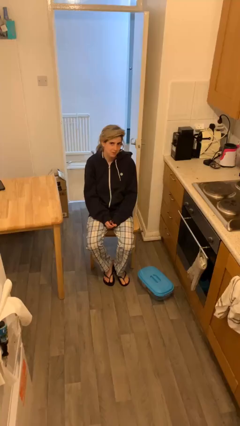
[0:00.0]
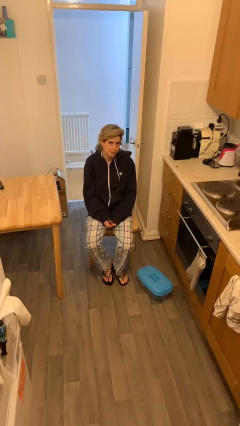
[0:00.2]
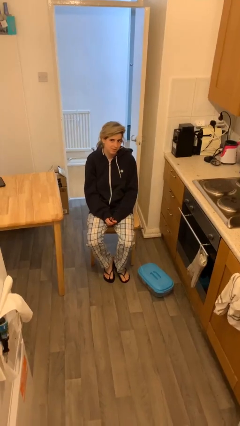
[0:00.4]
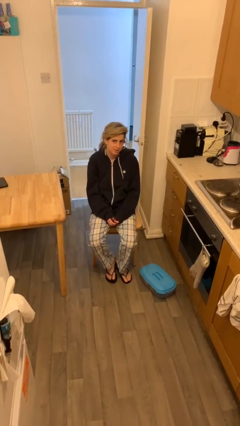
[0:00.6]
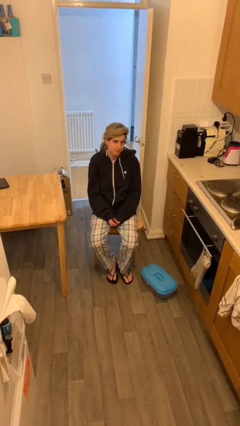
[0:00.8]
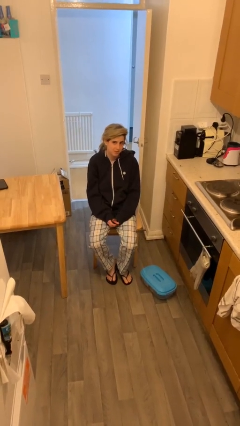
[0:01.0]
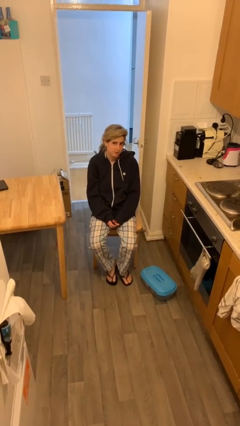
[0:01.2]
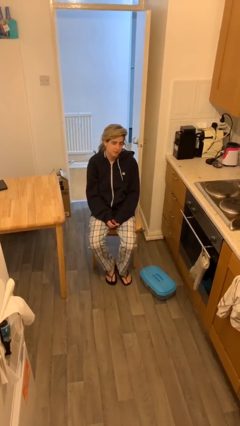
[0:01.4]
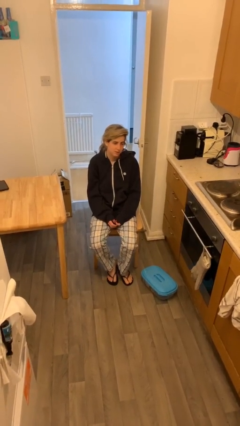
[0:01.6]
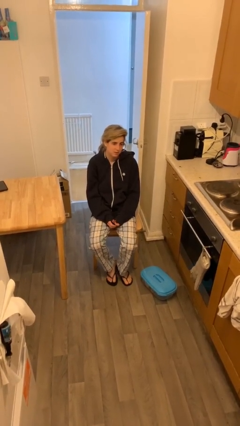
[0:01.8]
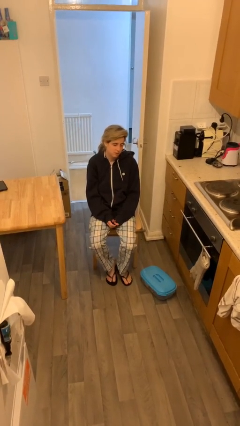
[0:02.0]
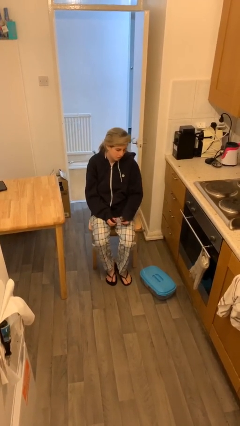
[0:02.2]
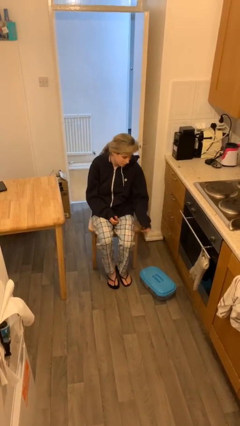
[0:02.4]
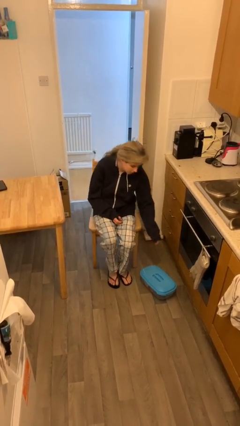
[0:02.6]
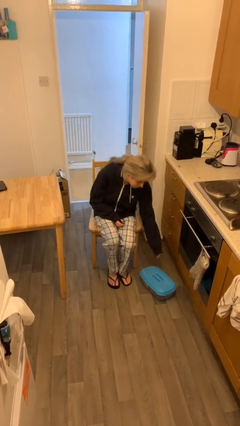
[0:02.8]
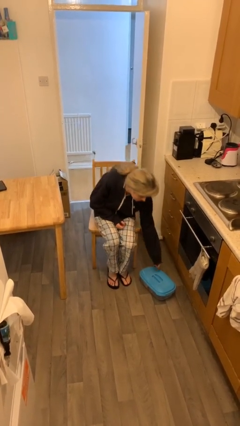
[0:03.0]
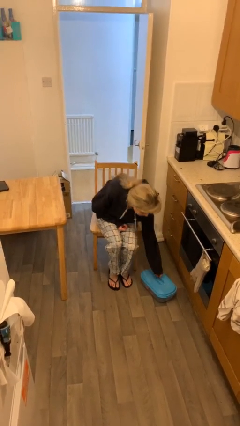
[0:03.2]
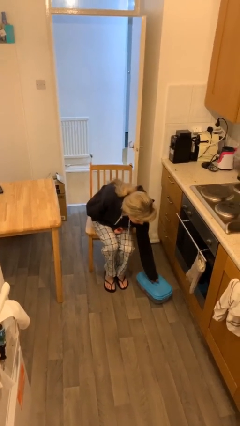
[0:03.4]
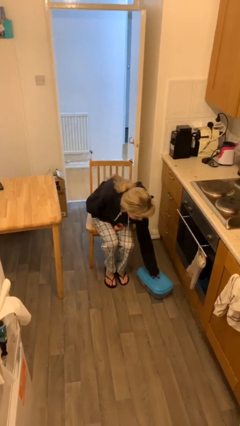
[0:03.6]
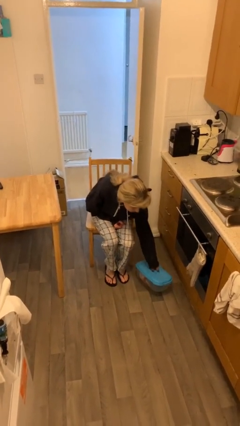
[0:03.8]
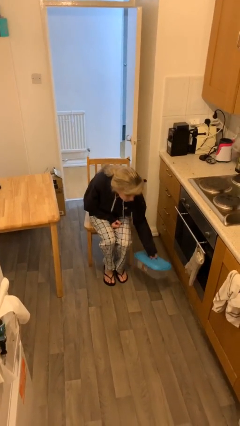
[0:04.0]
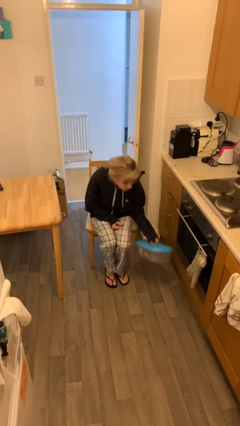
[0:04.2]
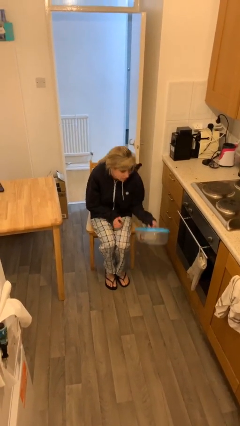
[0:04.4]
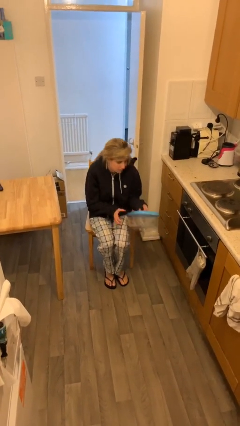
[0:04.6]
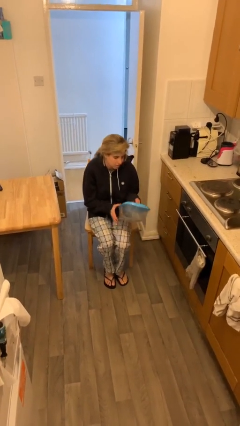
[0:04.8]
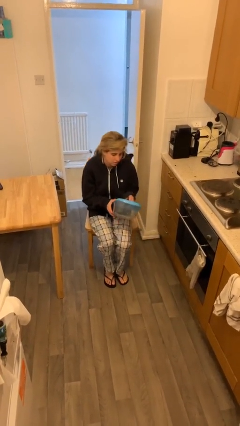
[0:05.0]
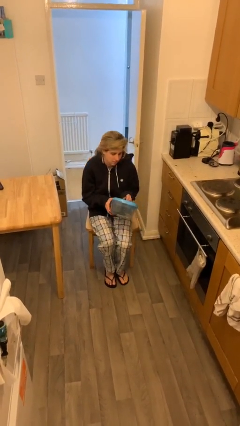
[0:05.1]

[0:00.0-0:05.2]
person picks up object from floor

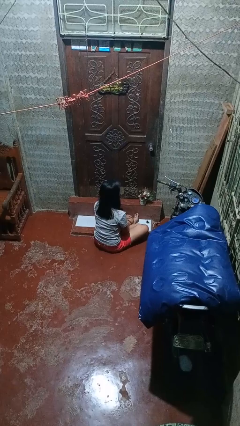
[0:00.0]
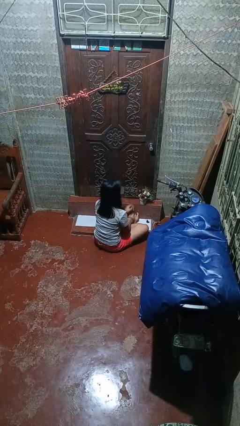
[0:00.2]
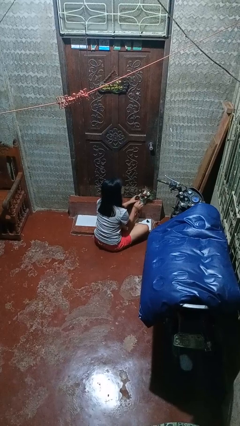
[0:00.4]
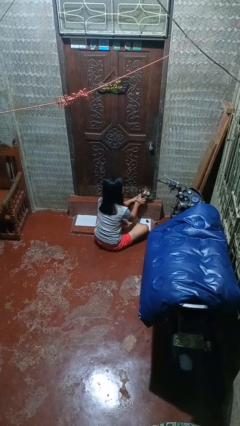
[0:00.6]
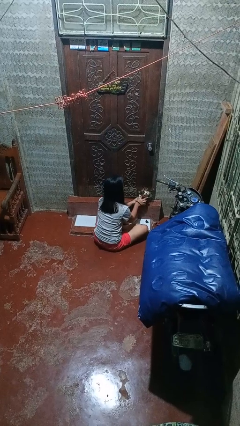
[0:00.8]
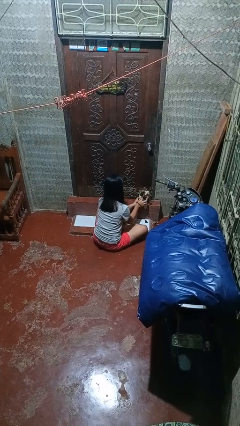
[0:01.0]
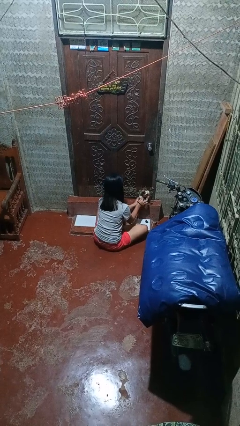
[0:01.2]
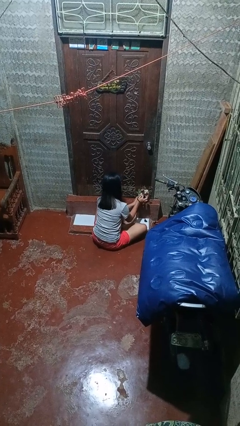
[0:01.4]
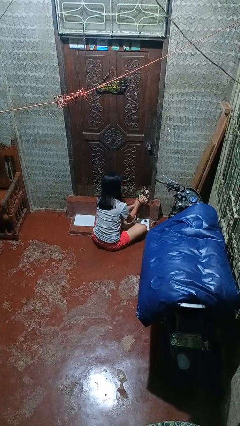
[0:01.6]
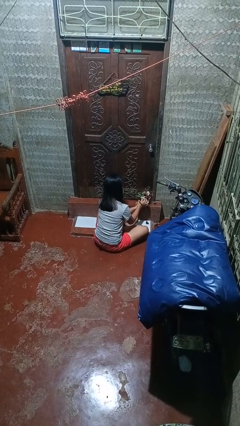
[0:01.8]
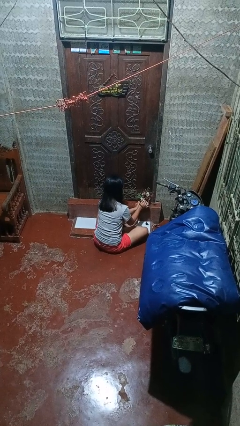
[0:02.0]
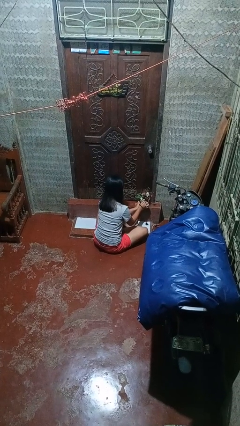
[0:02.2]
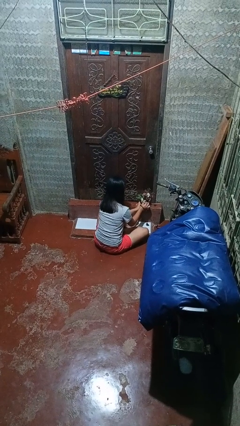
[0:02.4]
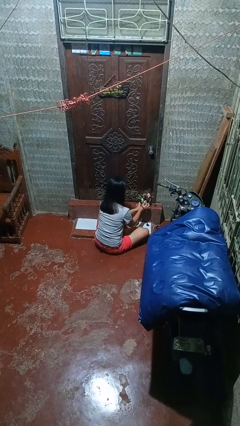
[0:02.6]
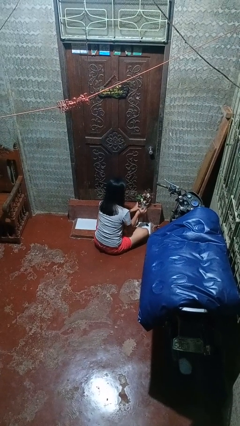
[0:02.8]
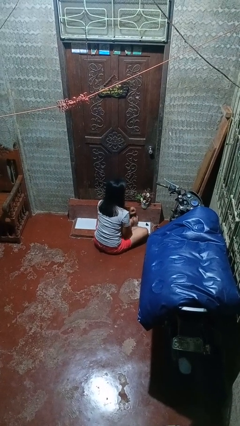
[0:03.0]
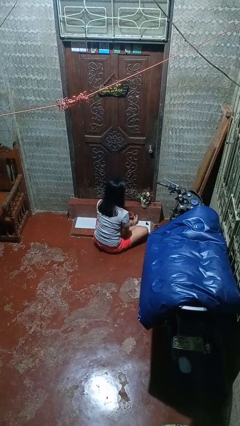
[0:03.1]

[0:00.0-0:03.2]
person arranges flowers in vase

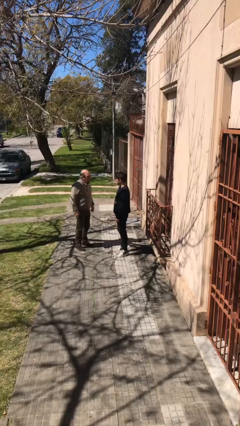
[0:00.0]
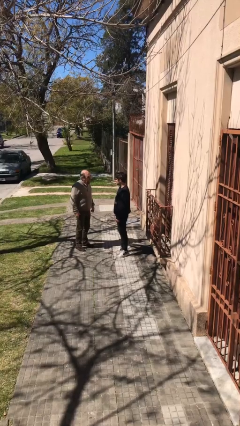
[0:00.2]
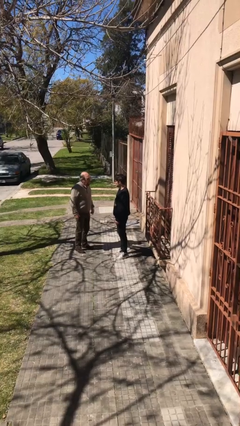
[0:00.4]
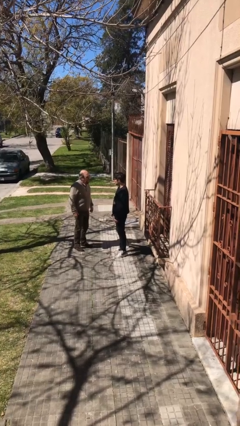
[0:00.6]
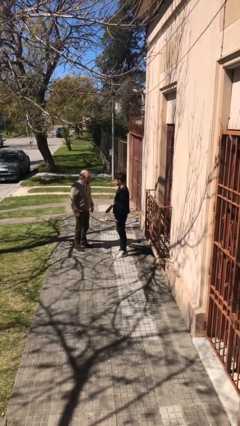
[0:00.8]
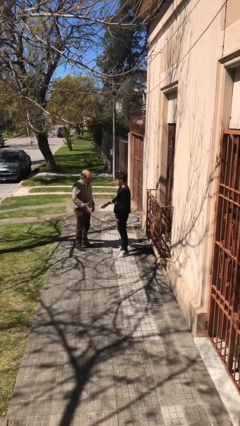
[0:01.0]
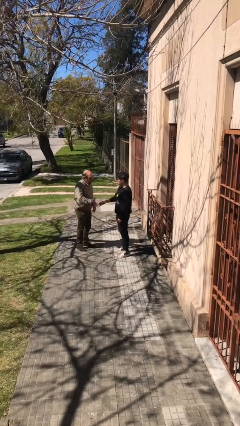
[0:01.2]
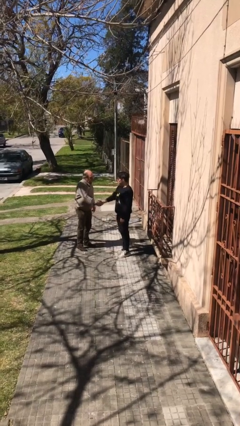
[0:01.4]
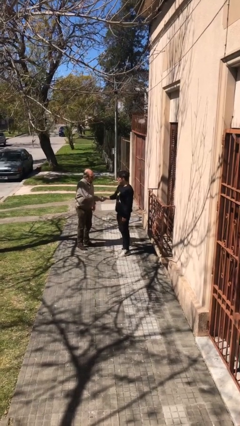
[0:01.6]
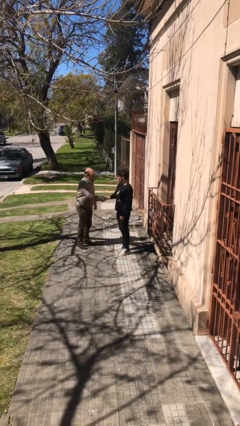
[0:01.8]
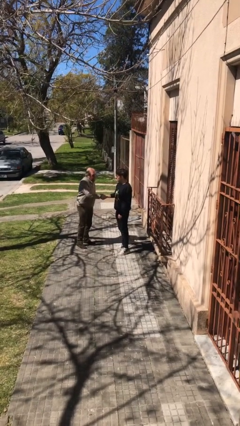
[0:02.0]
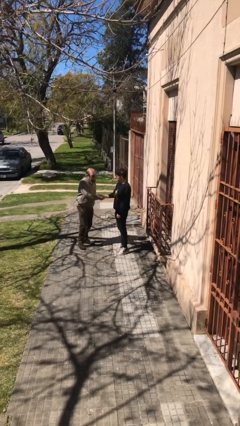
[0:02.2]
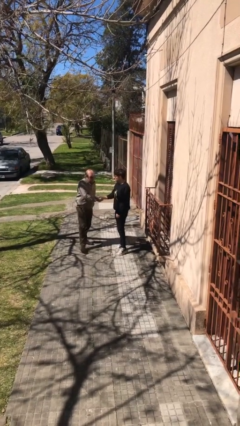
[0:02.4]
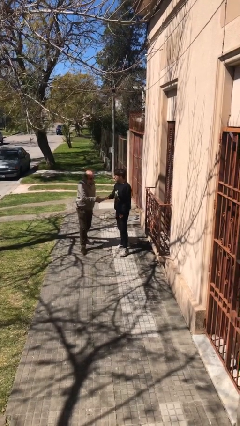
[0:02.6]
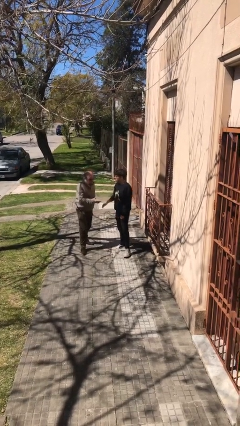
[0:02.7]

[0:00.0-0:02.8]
person shakes hand

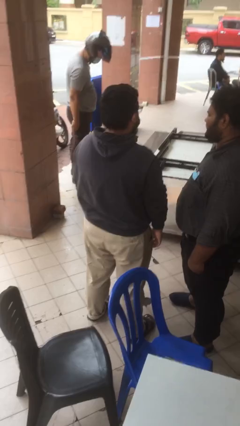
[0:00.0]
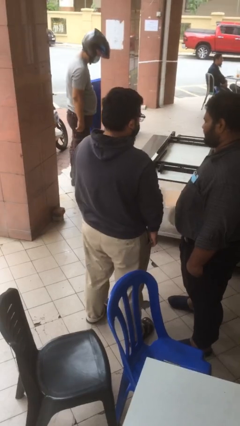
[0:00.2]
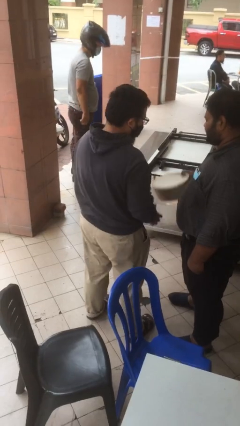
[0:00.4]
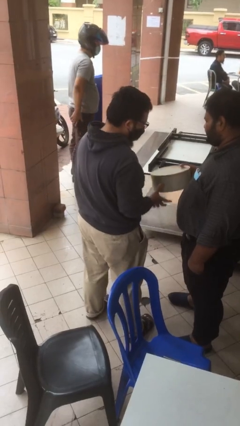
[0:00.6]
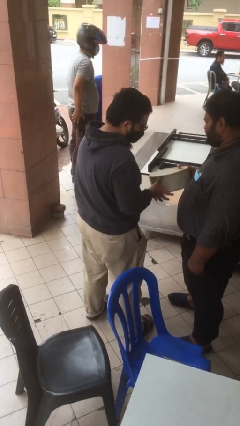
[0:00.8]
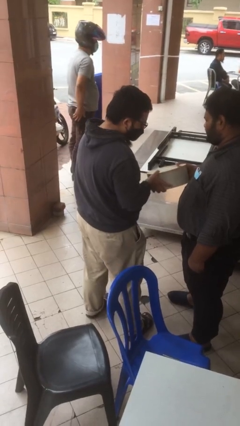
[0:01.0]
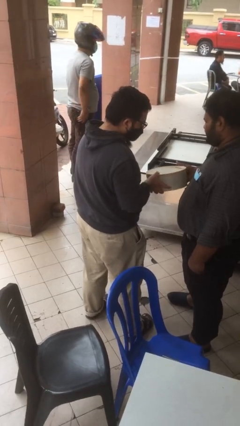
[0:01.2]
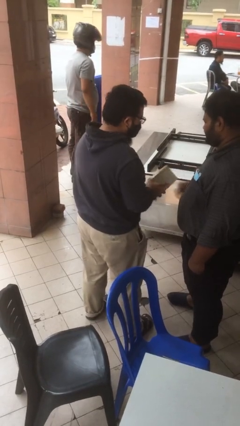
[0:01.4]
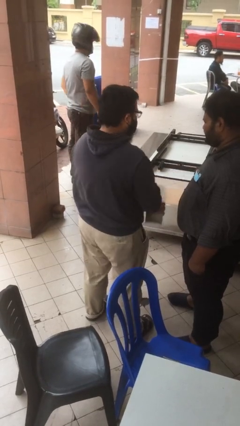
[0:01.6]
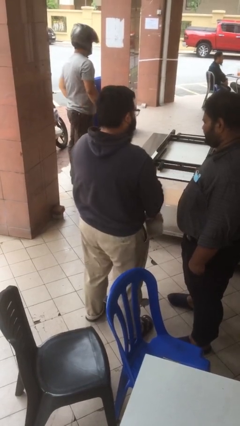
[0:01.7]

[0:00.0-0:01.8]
person transfers object to person

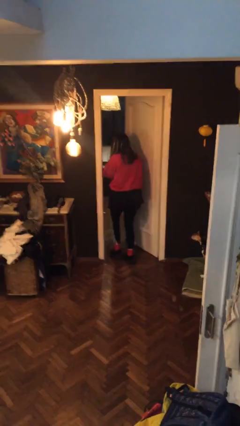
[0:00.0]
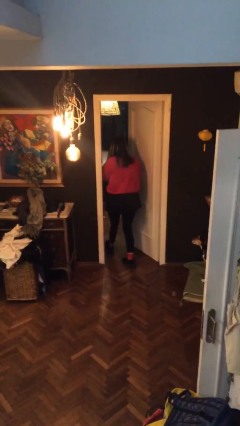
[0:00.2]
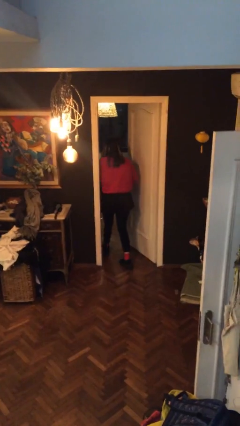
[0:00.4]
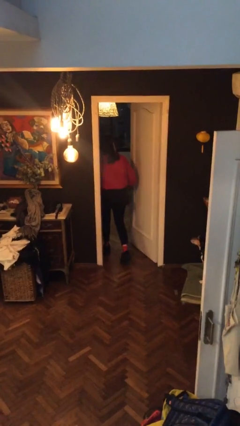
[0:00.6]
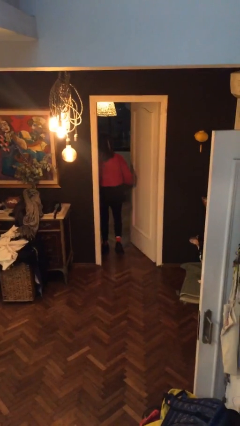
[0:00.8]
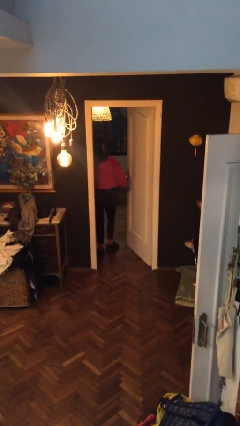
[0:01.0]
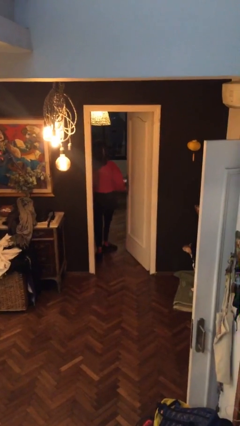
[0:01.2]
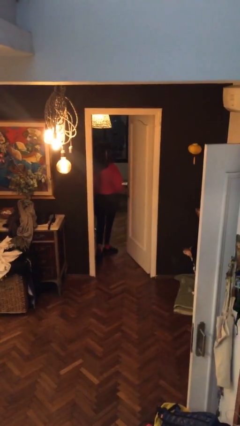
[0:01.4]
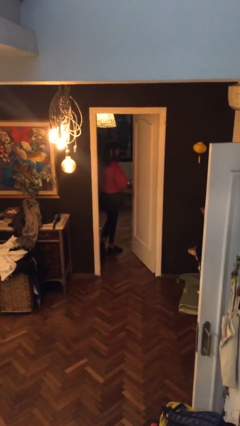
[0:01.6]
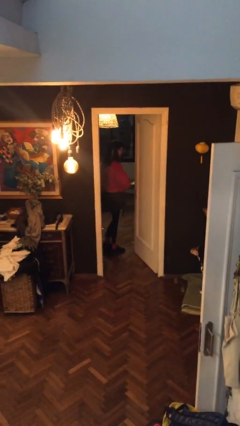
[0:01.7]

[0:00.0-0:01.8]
person exits scene through structure

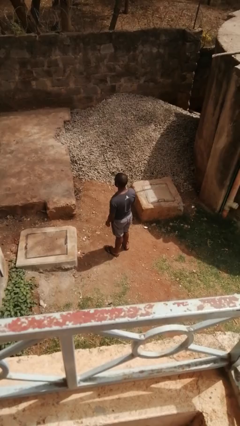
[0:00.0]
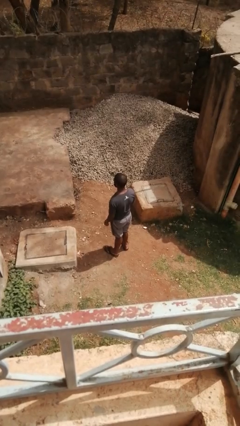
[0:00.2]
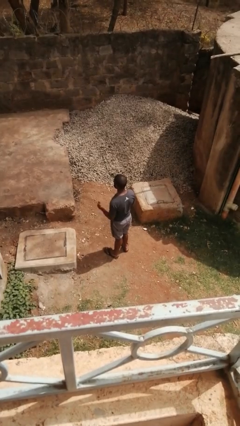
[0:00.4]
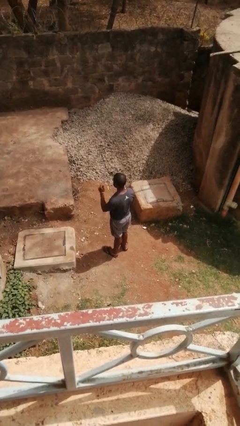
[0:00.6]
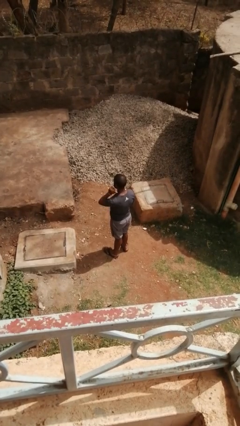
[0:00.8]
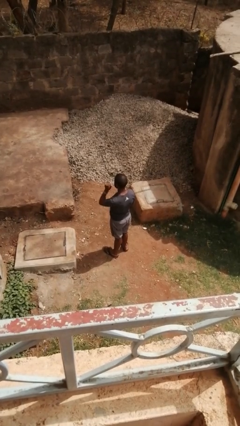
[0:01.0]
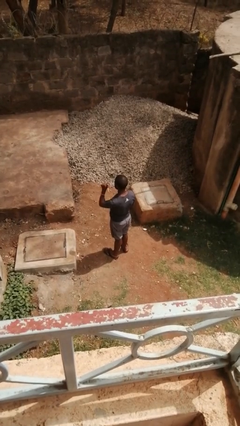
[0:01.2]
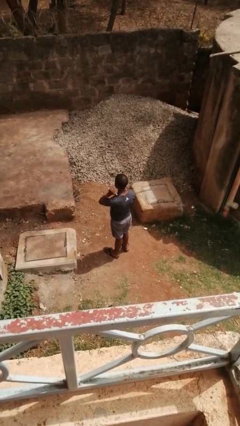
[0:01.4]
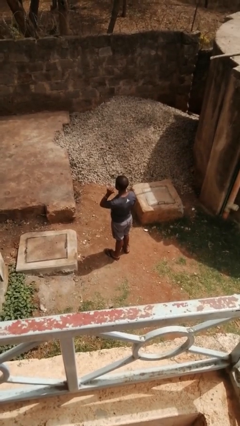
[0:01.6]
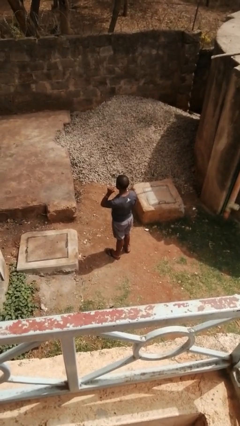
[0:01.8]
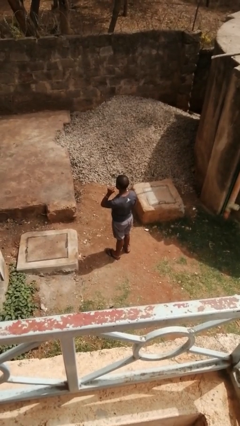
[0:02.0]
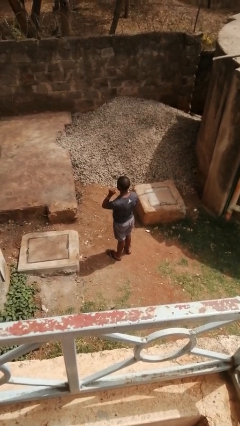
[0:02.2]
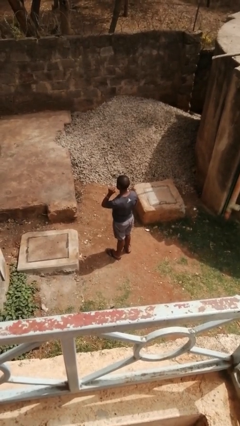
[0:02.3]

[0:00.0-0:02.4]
person gestures behind me

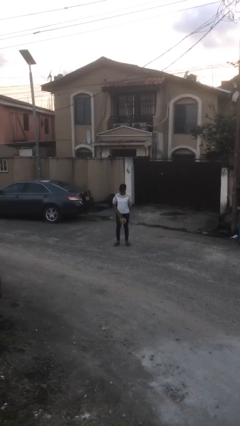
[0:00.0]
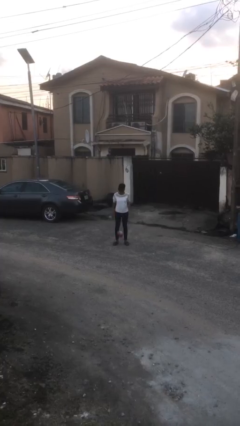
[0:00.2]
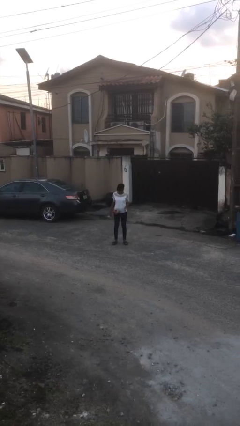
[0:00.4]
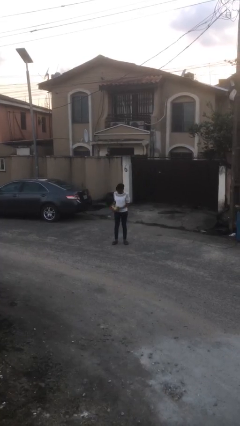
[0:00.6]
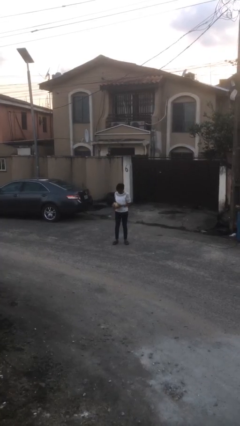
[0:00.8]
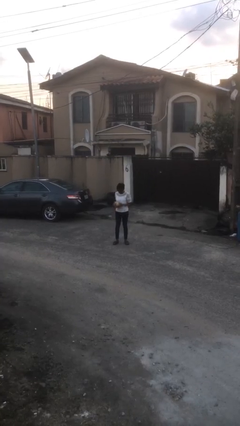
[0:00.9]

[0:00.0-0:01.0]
person bounces ball on floor
